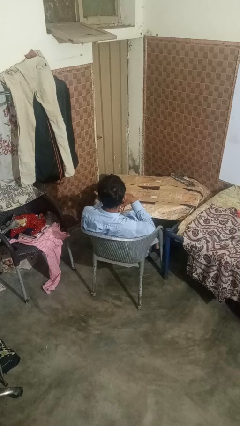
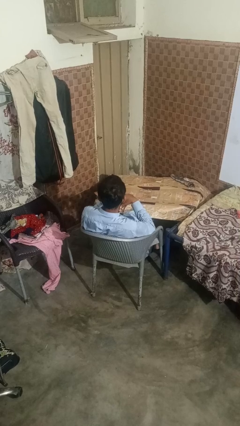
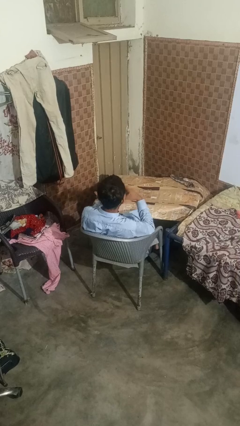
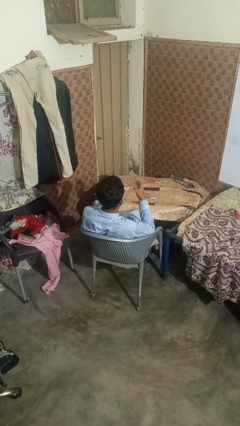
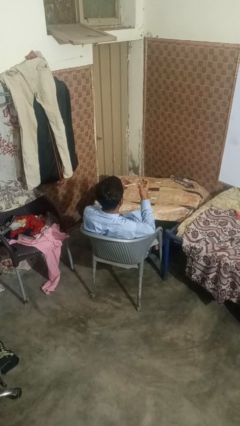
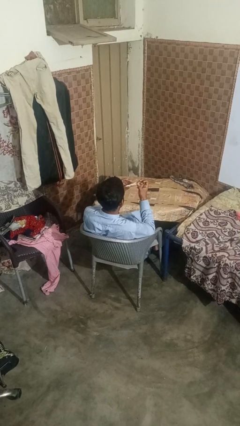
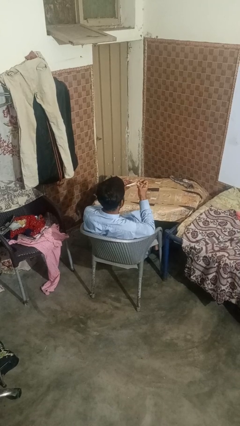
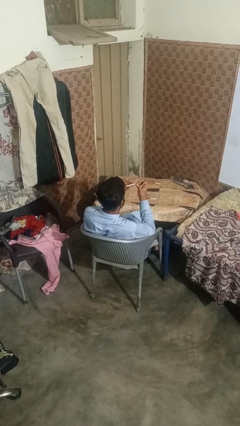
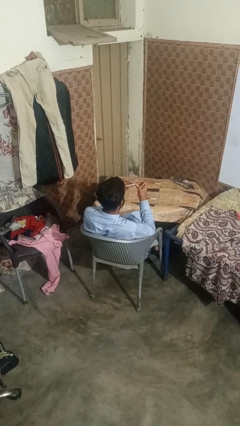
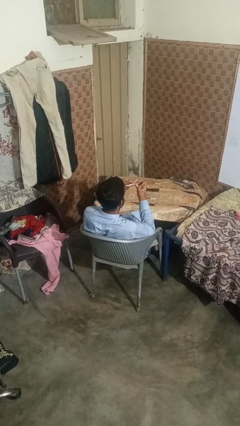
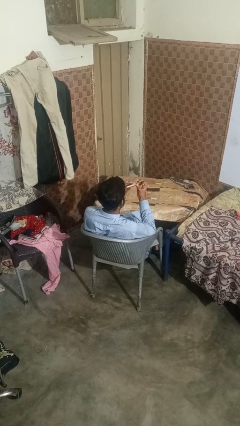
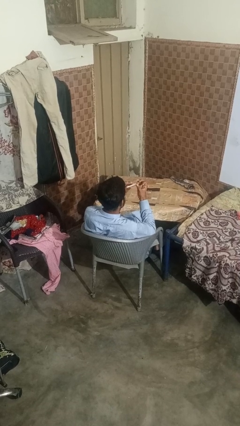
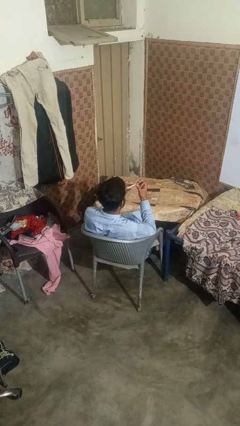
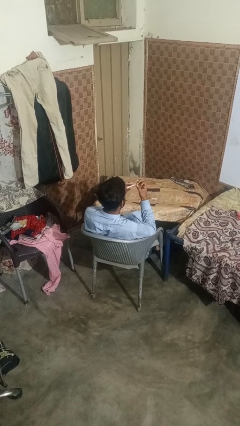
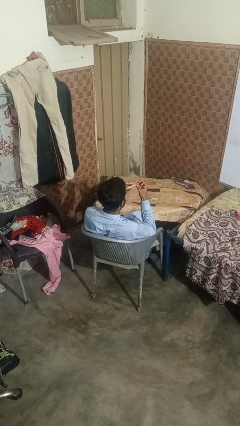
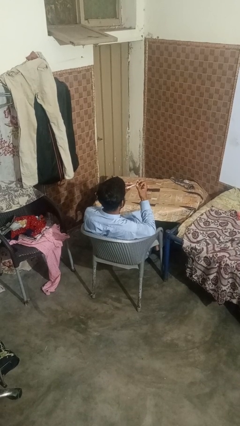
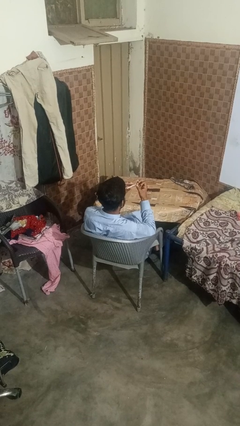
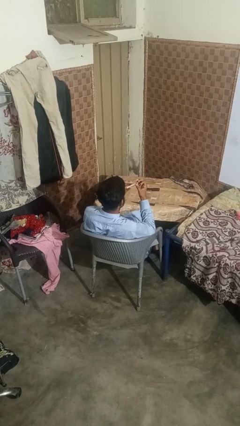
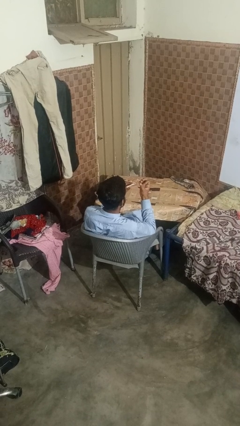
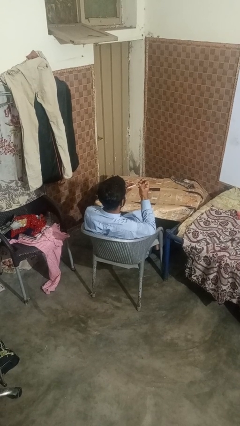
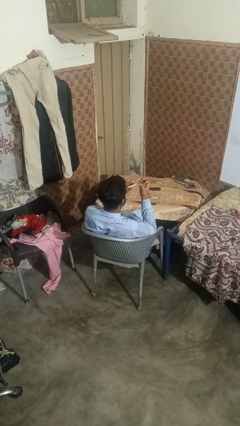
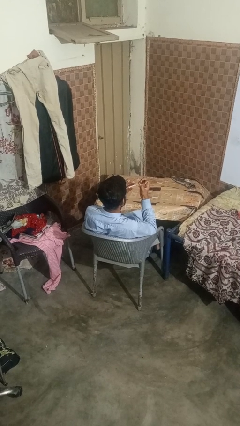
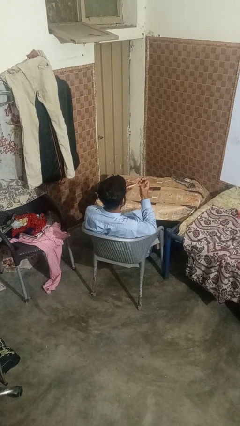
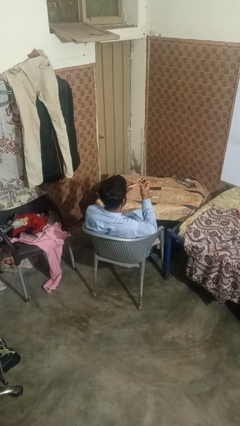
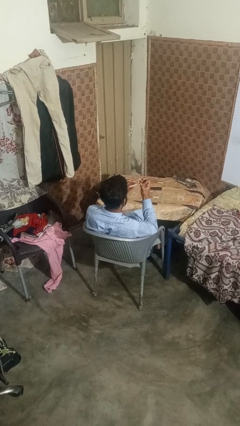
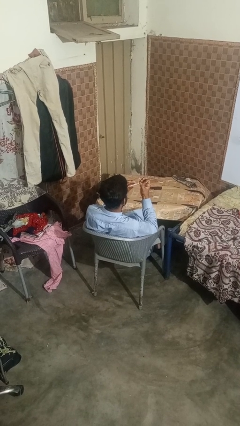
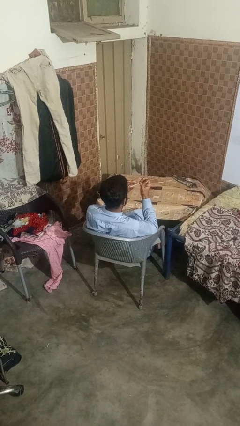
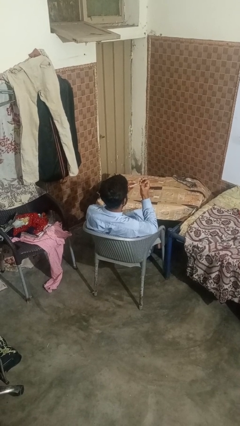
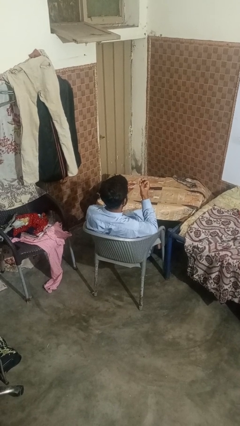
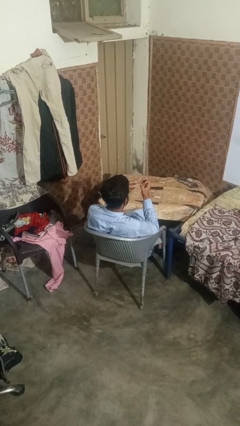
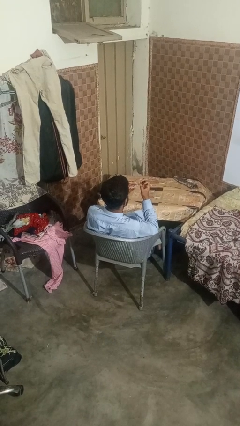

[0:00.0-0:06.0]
person clips fingernails

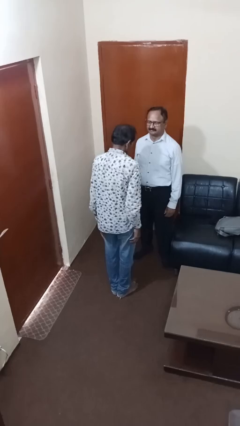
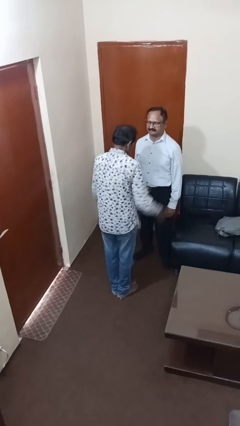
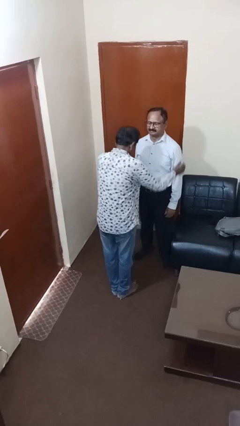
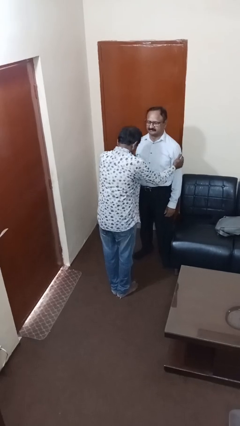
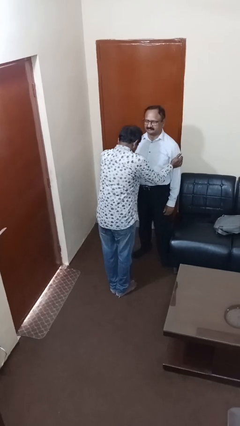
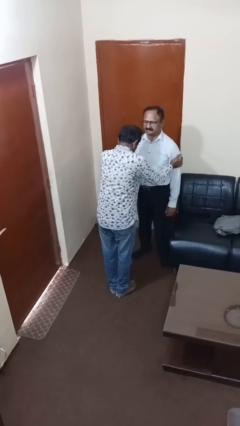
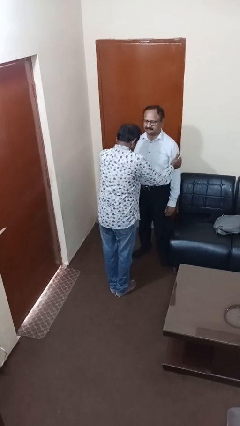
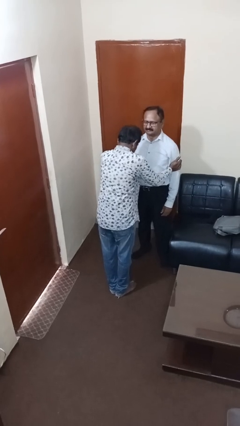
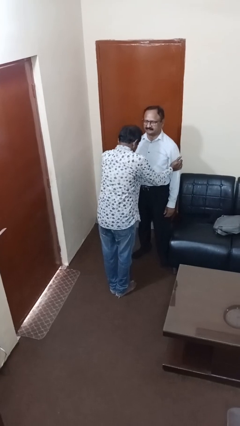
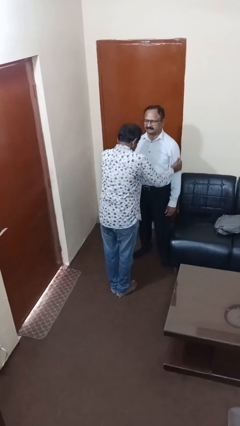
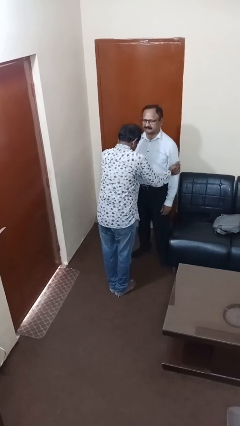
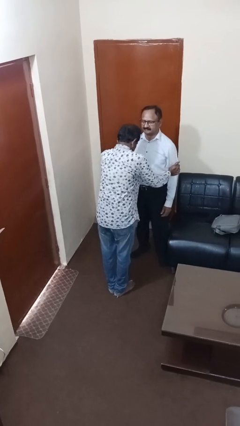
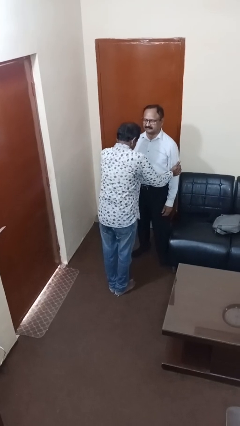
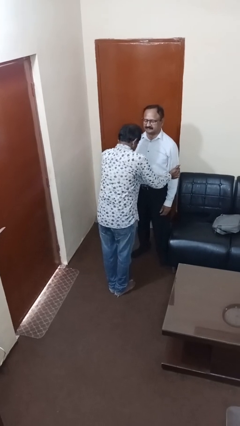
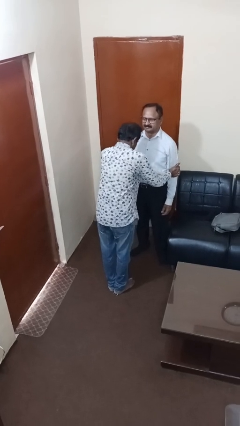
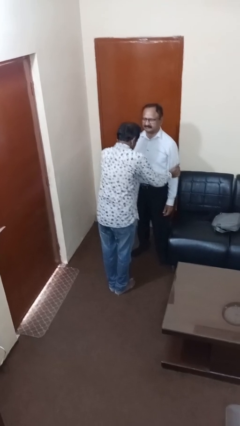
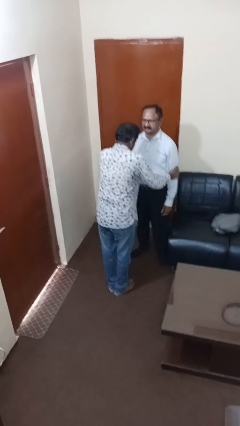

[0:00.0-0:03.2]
person grabs person by bicep

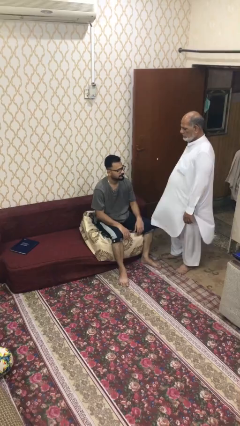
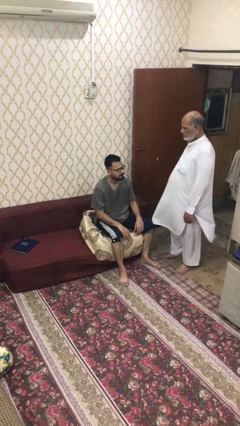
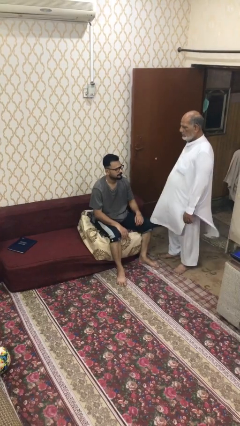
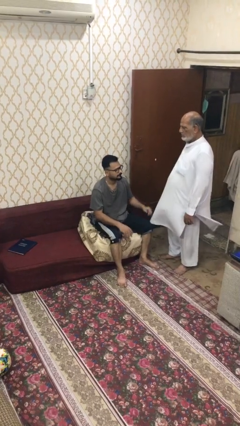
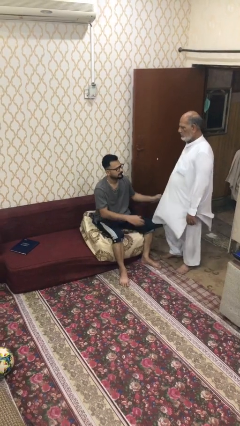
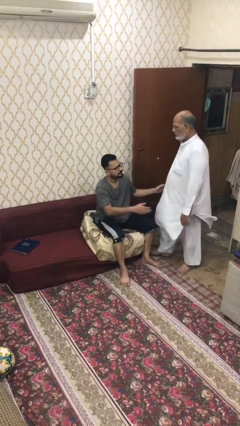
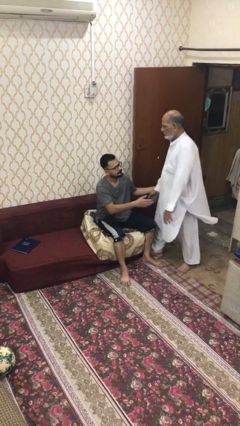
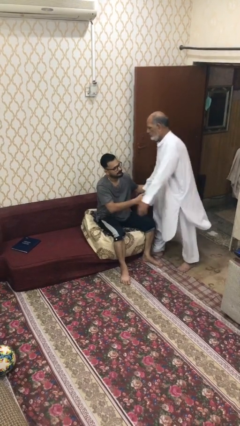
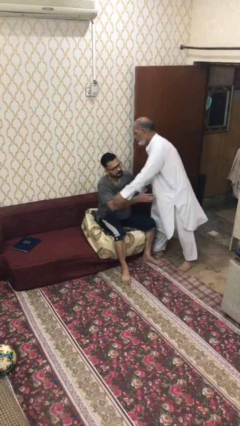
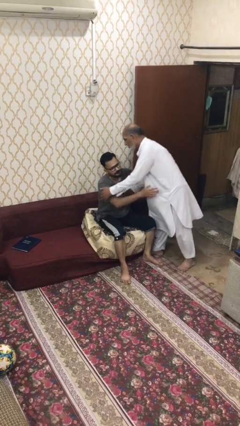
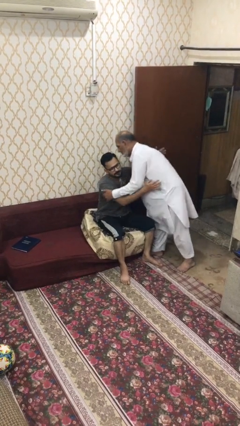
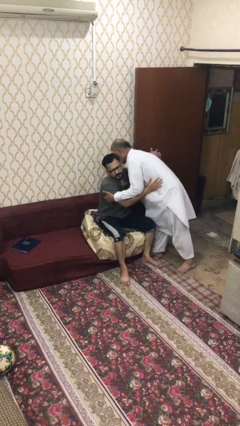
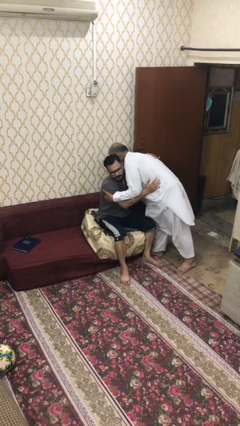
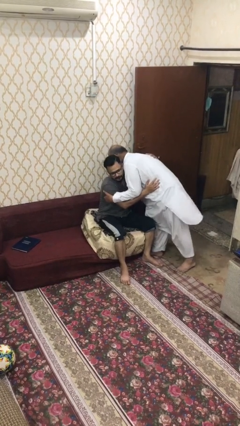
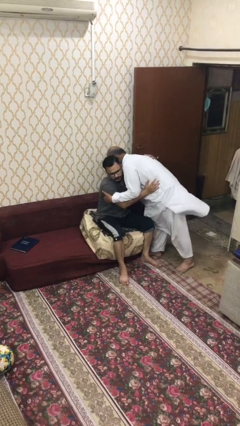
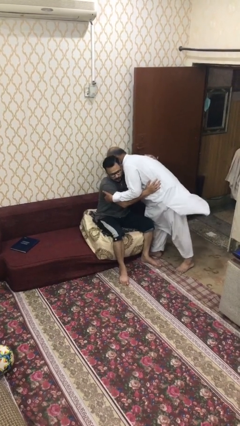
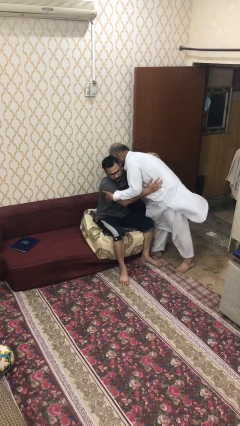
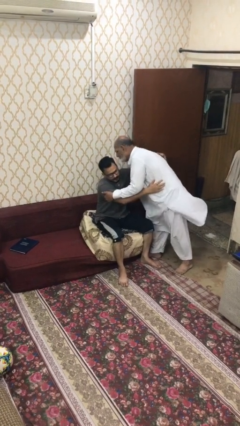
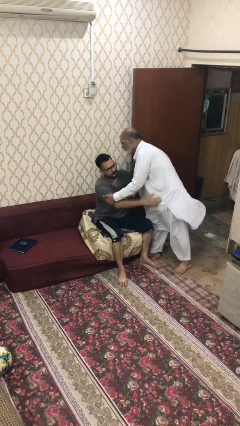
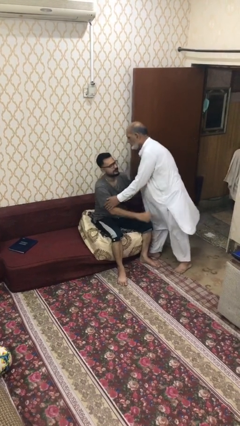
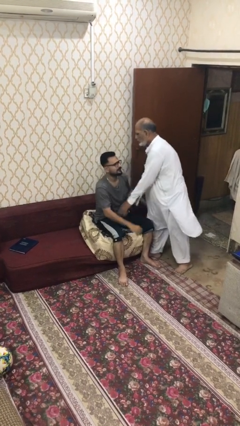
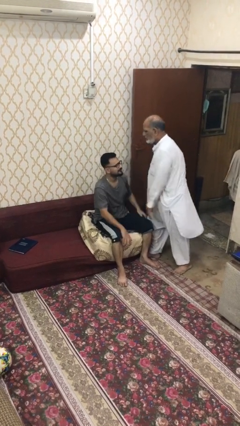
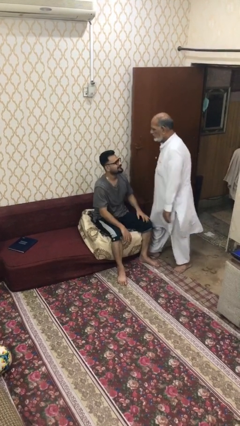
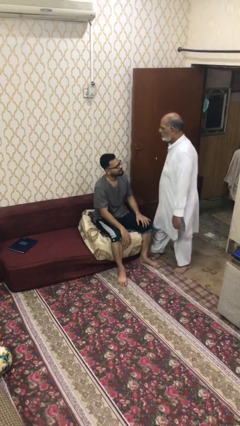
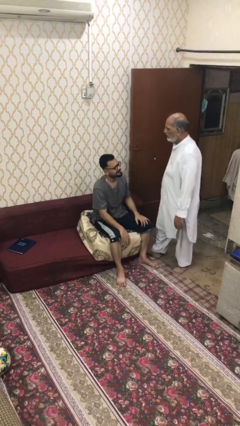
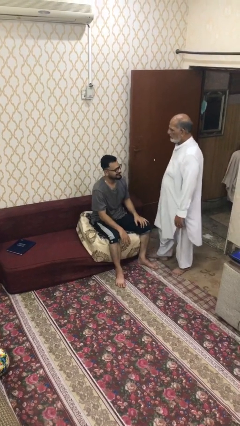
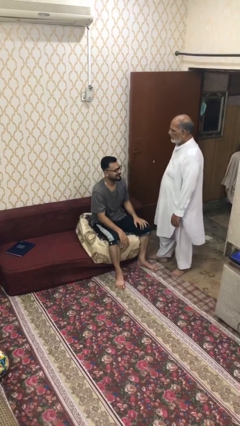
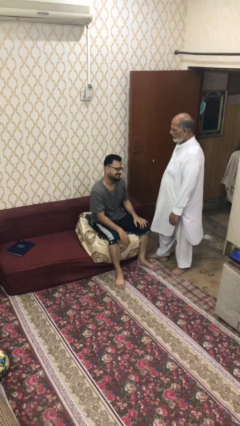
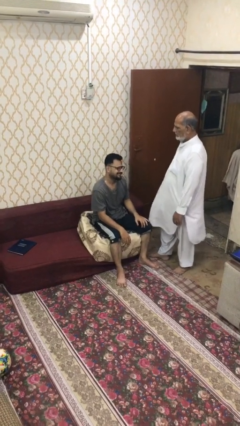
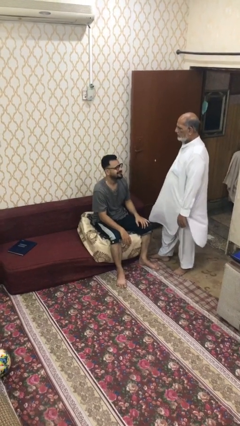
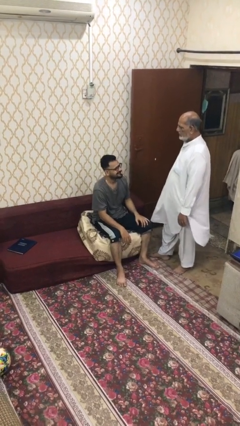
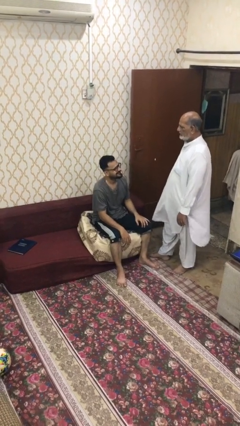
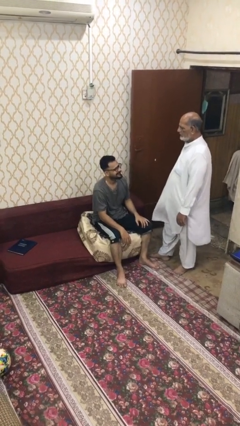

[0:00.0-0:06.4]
person embraces person

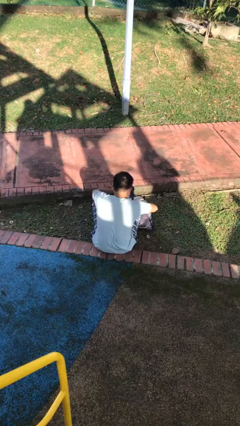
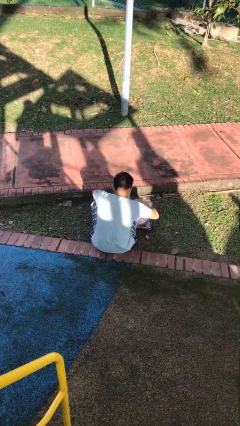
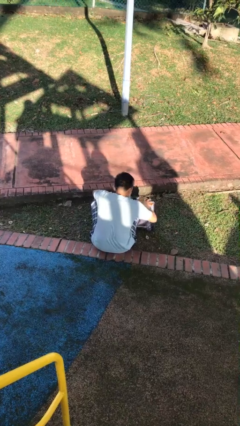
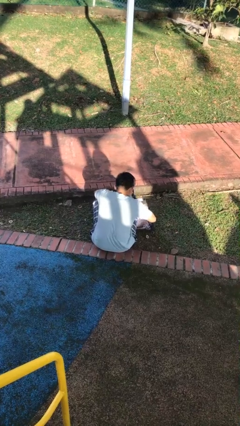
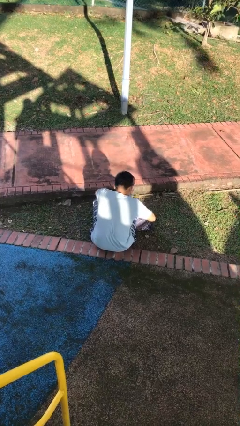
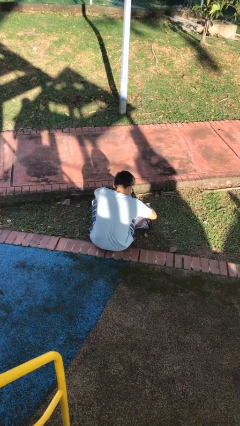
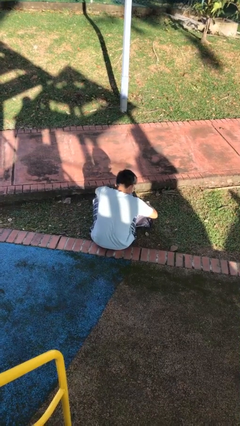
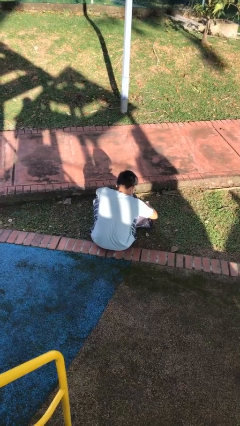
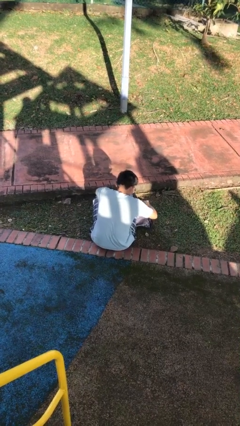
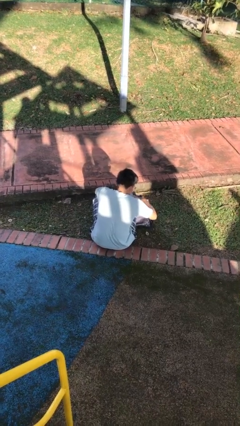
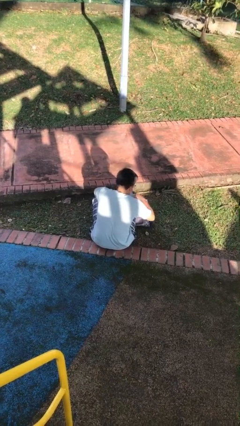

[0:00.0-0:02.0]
person searches in bag

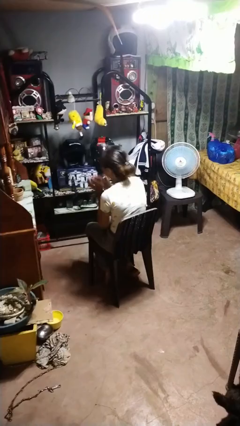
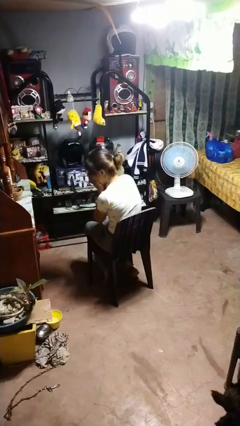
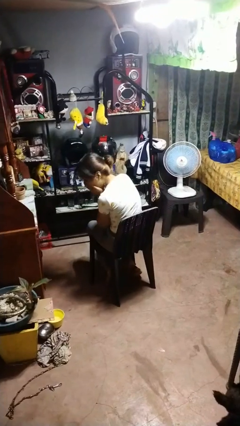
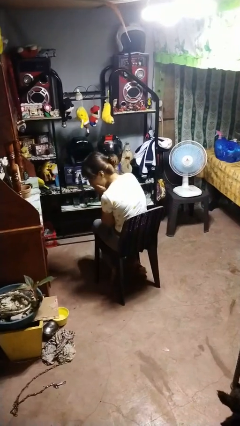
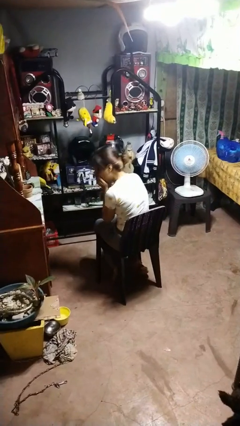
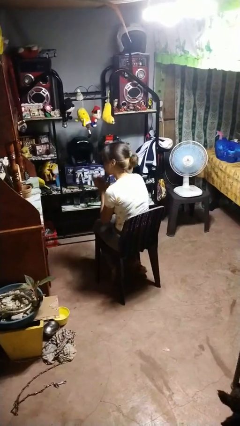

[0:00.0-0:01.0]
person sneezes into hand
